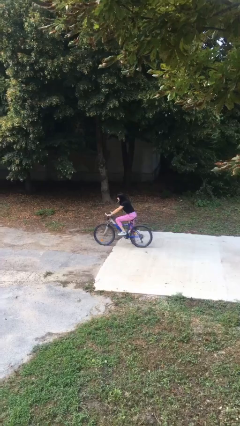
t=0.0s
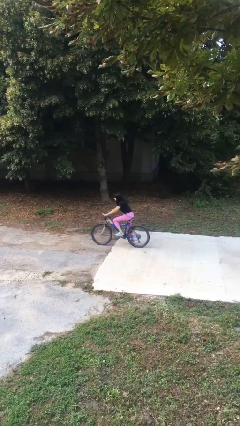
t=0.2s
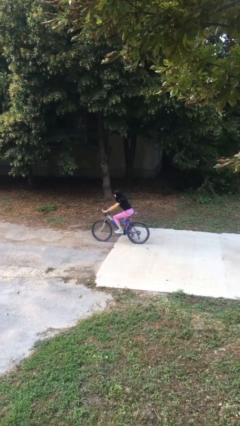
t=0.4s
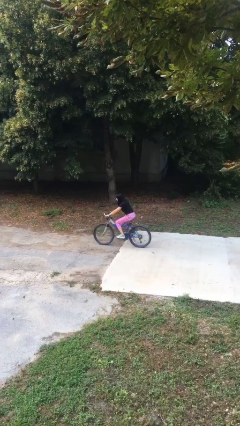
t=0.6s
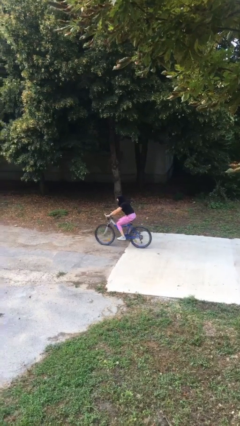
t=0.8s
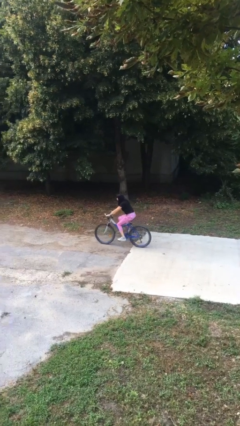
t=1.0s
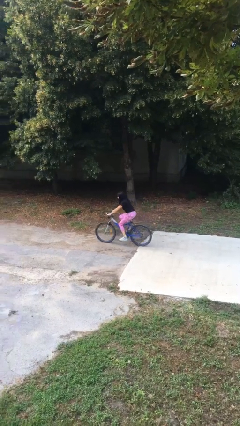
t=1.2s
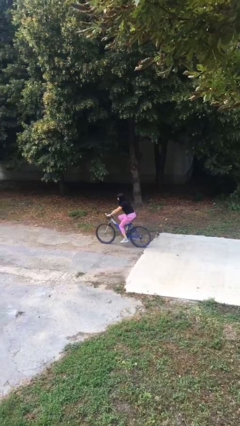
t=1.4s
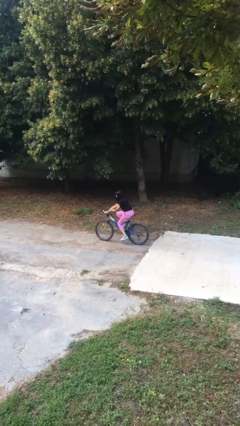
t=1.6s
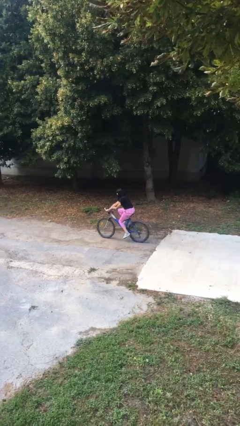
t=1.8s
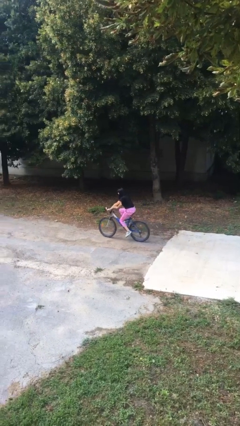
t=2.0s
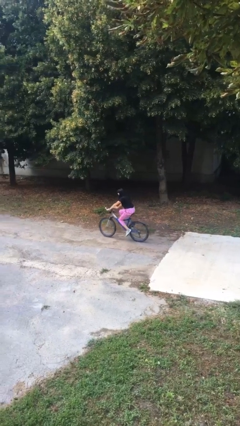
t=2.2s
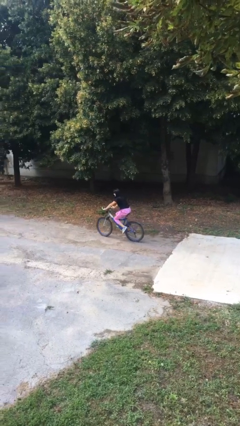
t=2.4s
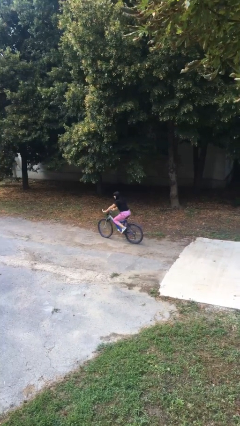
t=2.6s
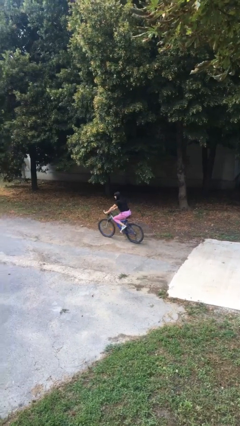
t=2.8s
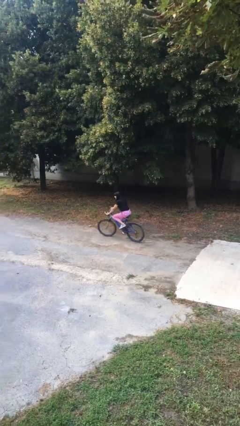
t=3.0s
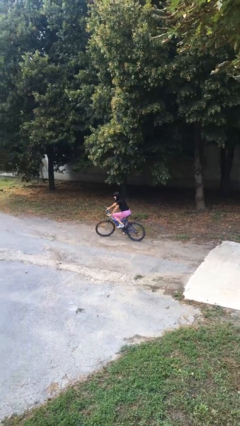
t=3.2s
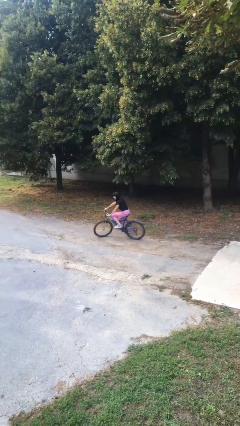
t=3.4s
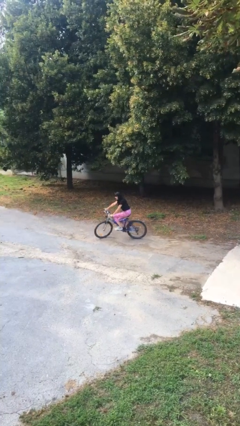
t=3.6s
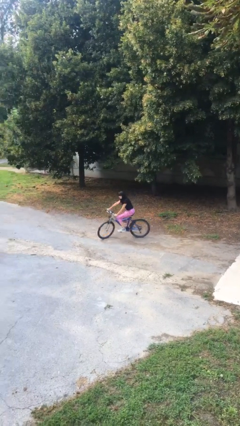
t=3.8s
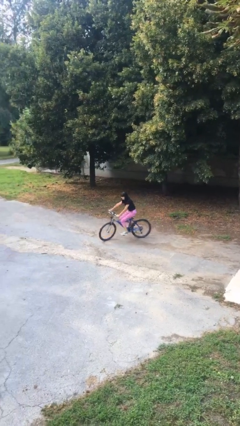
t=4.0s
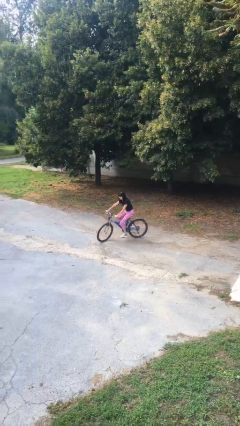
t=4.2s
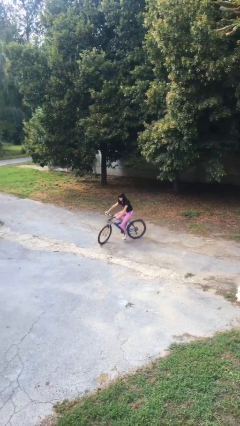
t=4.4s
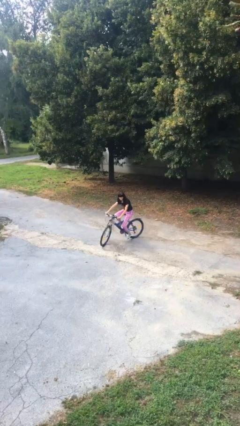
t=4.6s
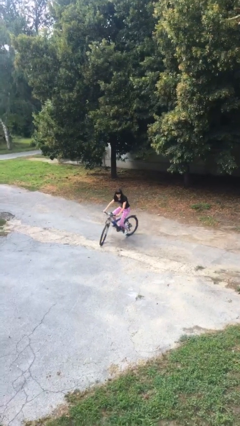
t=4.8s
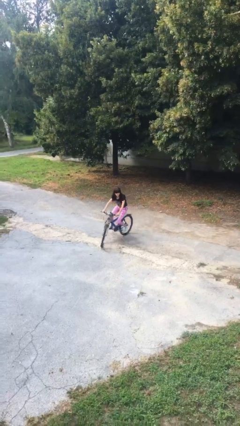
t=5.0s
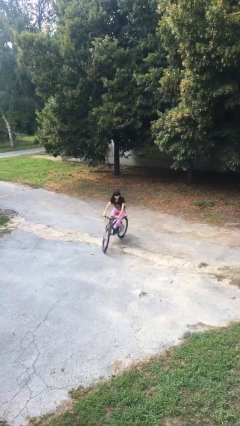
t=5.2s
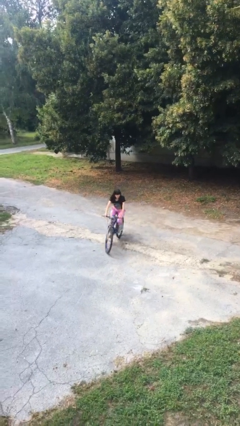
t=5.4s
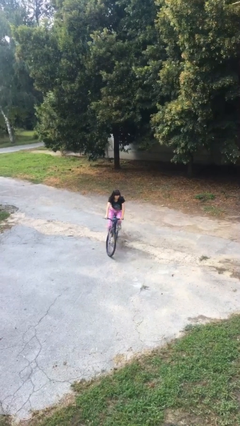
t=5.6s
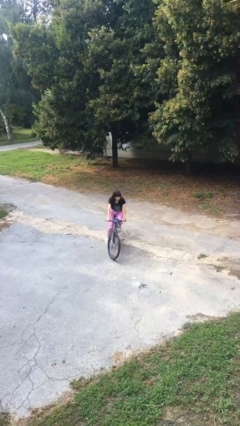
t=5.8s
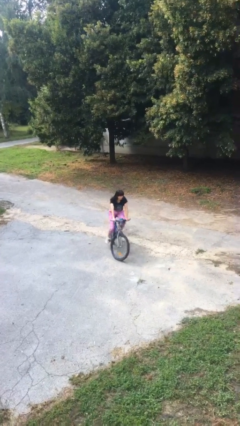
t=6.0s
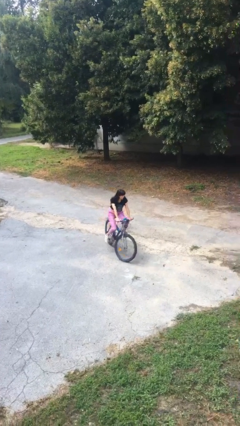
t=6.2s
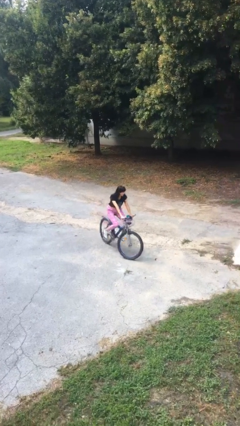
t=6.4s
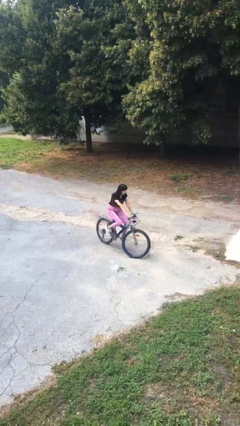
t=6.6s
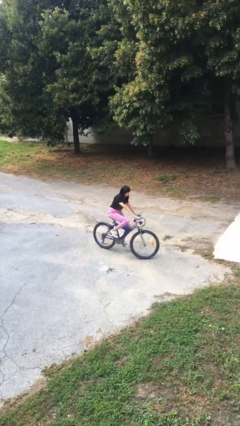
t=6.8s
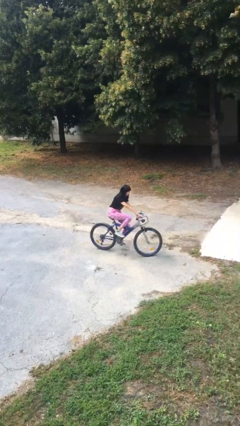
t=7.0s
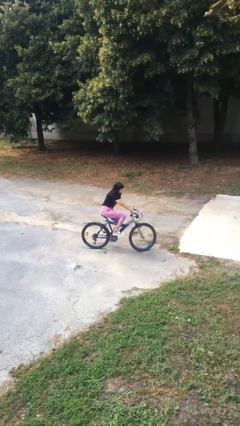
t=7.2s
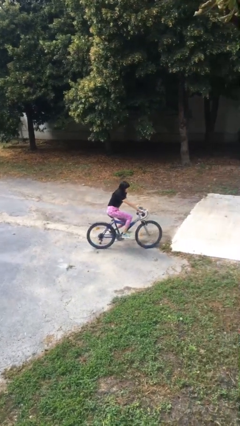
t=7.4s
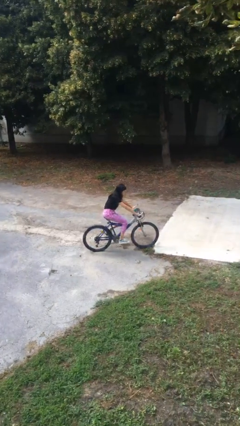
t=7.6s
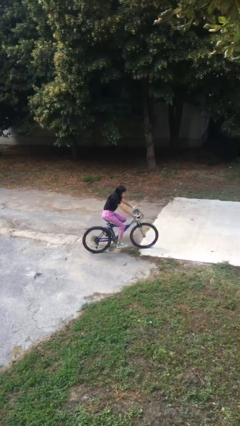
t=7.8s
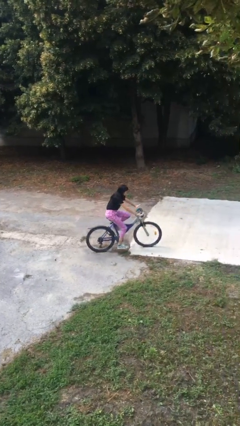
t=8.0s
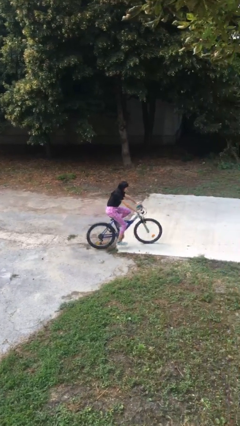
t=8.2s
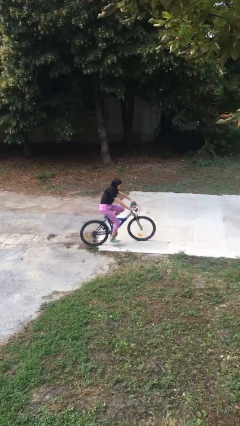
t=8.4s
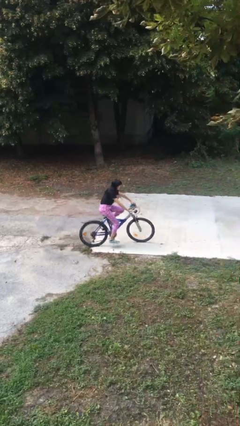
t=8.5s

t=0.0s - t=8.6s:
person rides bicycle

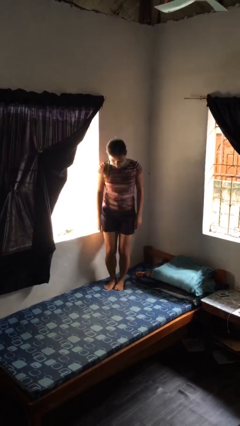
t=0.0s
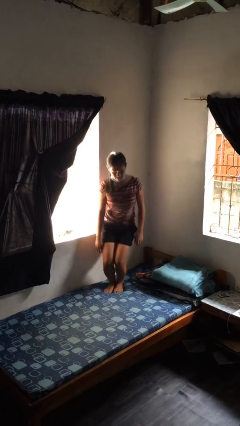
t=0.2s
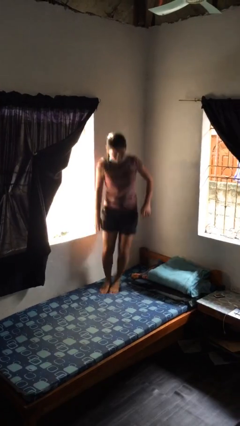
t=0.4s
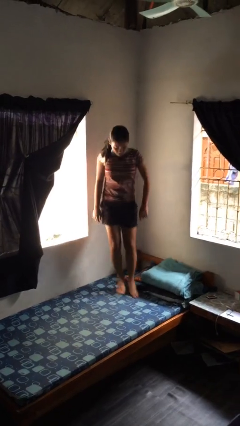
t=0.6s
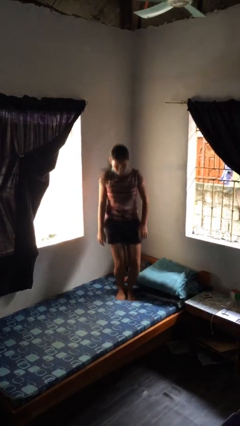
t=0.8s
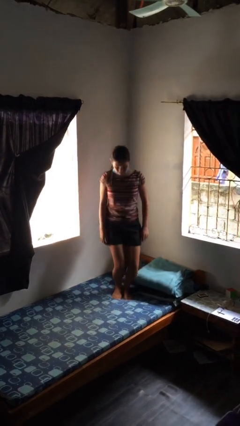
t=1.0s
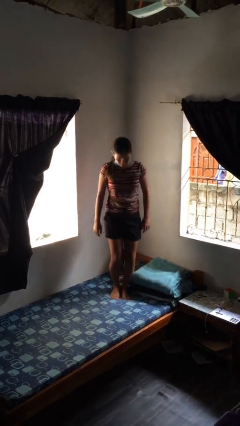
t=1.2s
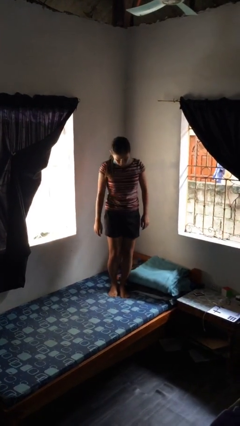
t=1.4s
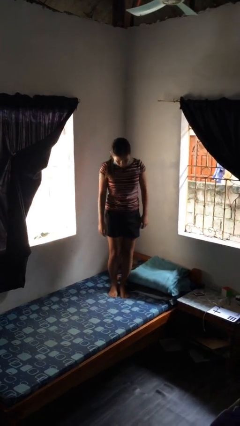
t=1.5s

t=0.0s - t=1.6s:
person jumps on bed

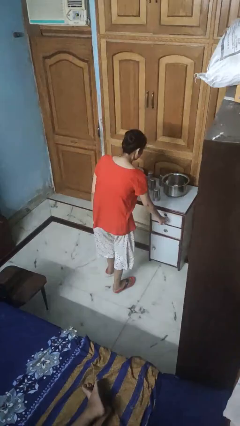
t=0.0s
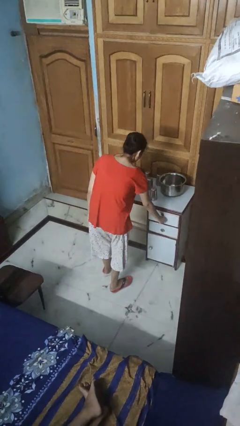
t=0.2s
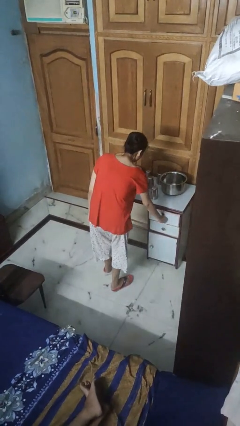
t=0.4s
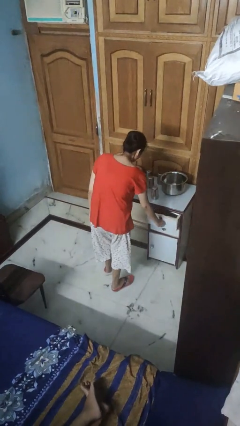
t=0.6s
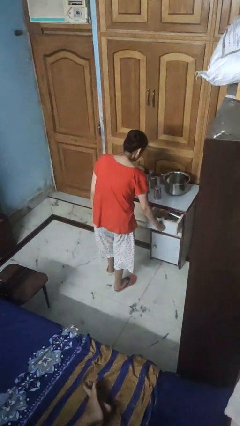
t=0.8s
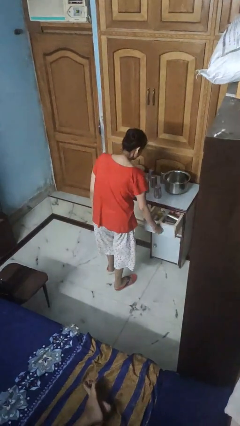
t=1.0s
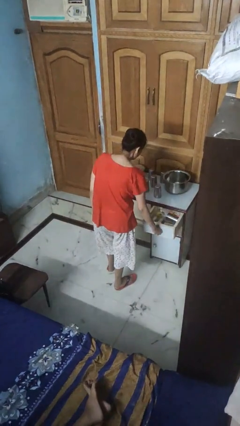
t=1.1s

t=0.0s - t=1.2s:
person opens kitchen drawer

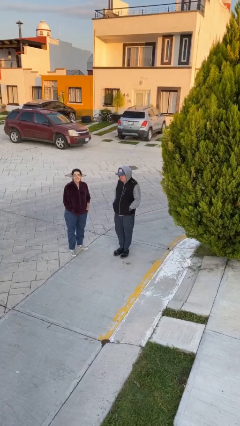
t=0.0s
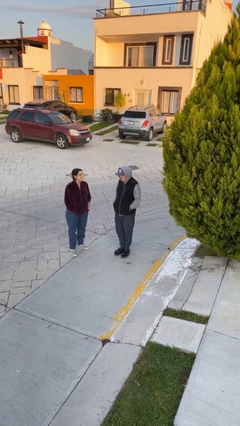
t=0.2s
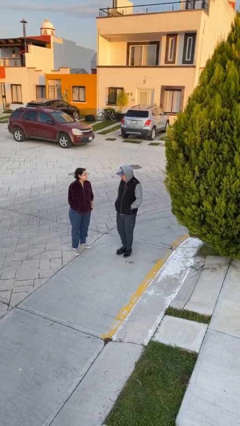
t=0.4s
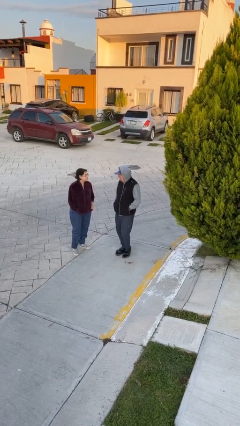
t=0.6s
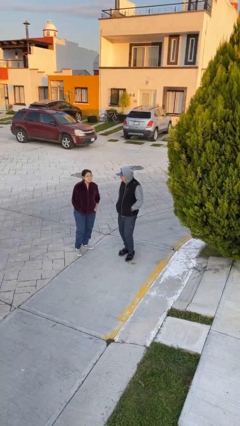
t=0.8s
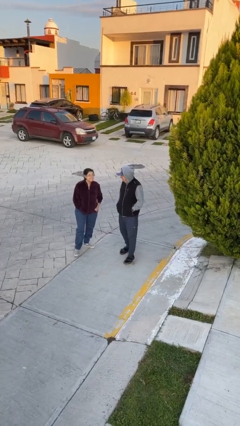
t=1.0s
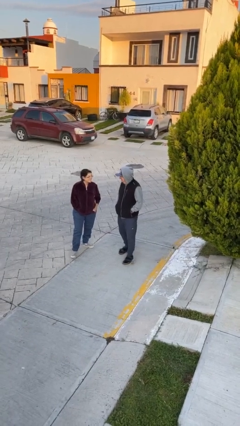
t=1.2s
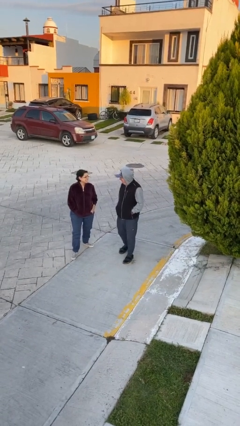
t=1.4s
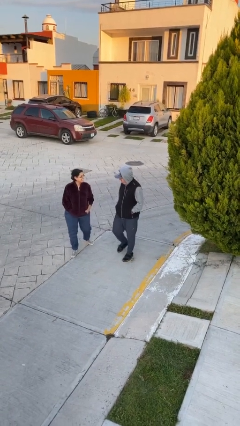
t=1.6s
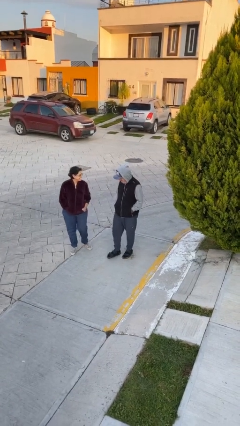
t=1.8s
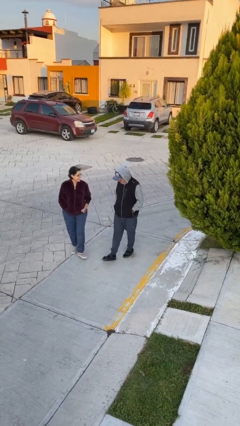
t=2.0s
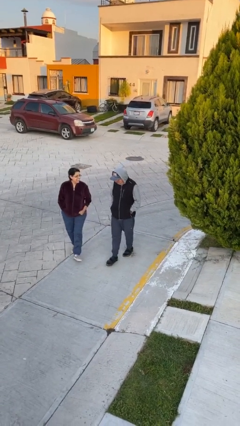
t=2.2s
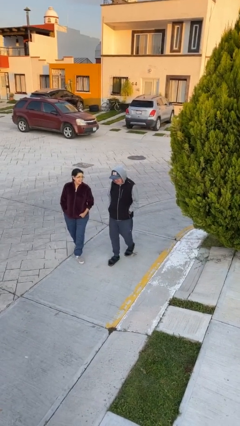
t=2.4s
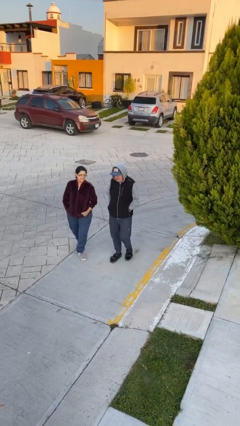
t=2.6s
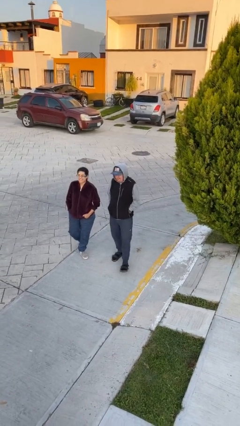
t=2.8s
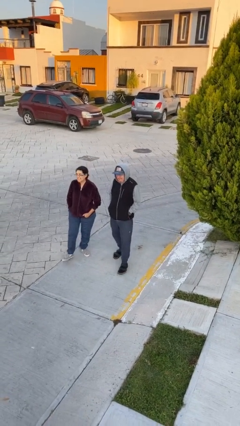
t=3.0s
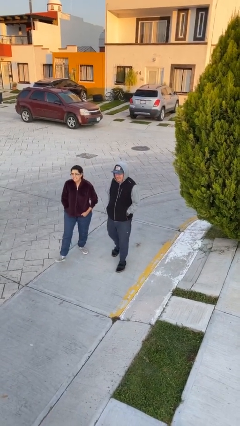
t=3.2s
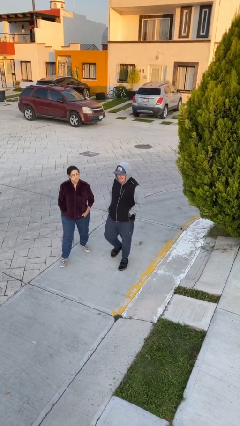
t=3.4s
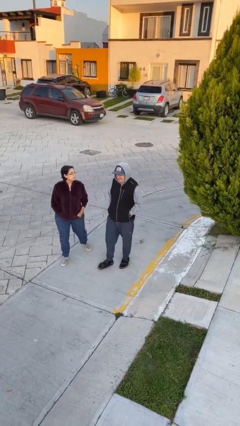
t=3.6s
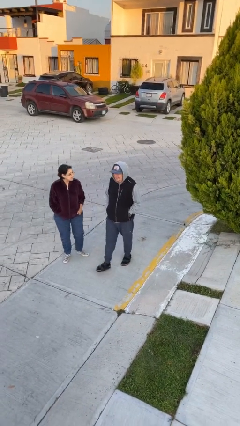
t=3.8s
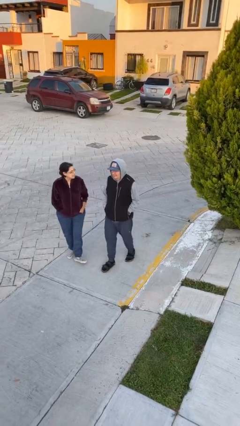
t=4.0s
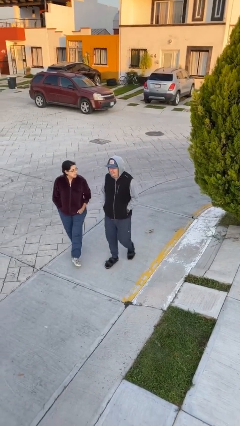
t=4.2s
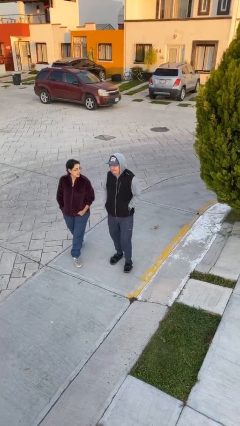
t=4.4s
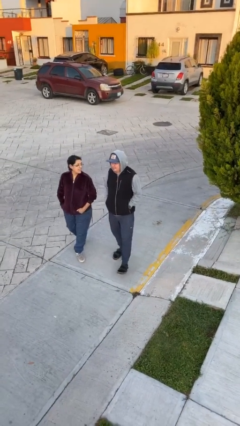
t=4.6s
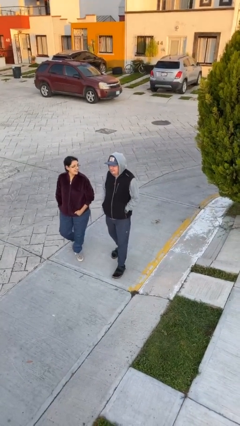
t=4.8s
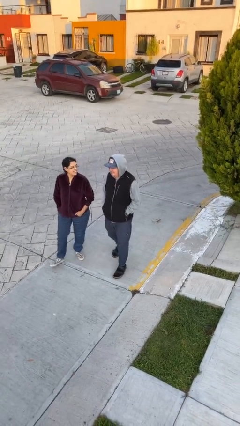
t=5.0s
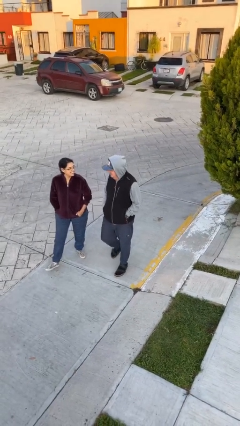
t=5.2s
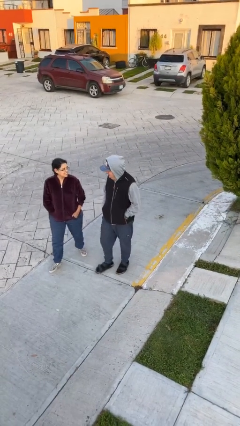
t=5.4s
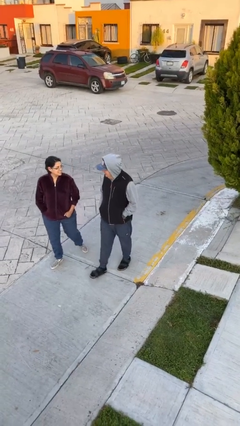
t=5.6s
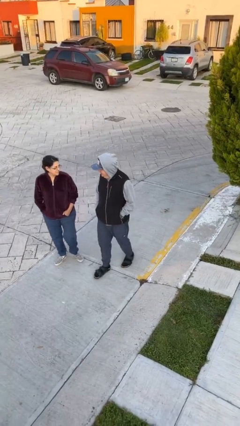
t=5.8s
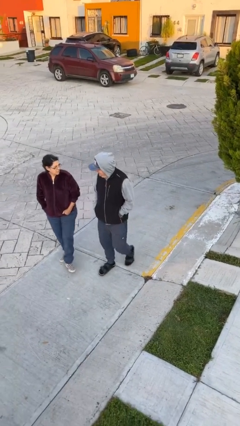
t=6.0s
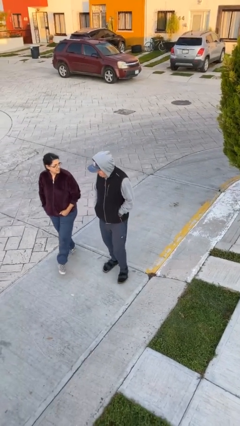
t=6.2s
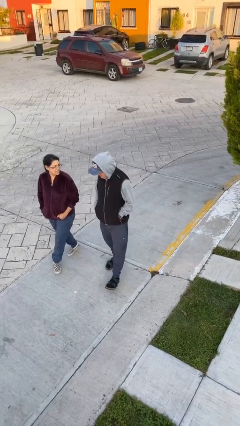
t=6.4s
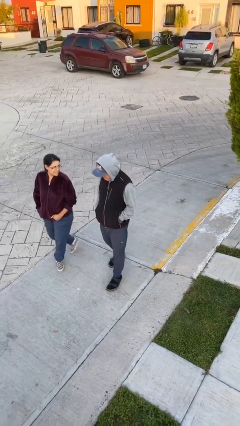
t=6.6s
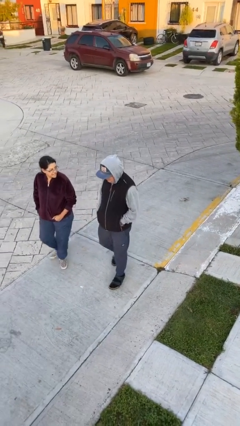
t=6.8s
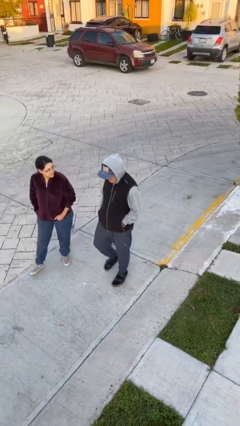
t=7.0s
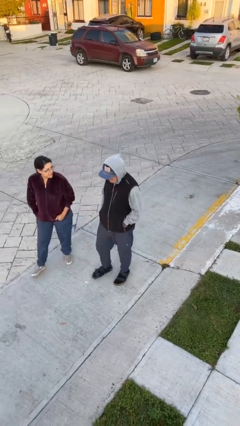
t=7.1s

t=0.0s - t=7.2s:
person talks to person
